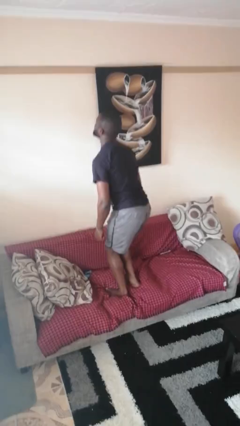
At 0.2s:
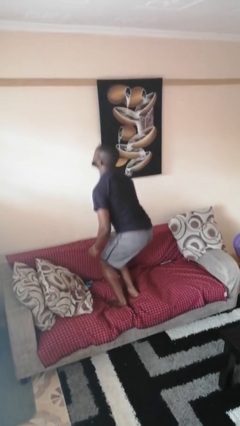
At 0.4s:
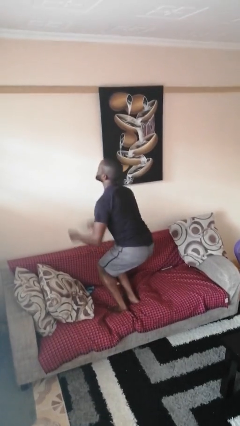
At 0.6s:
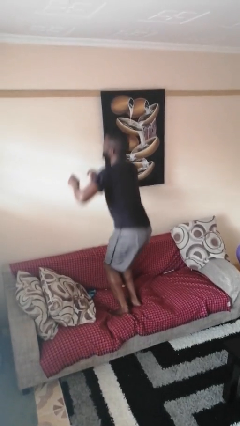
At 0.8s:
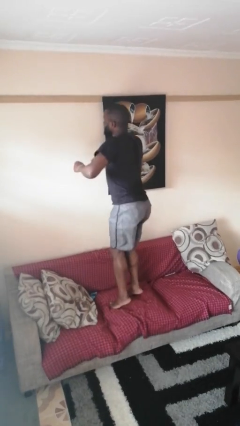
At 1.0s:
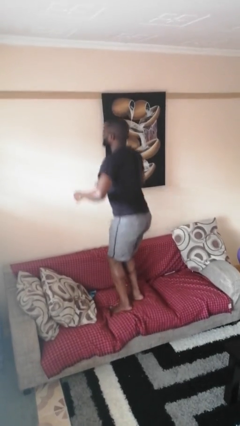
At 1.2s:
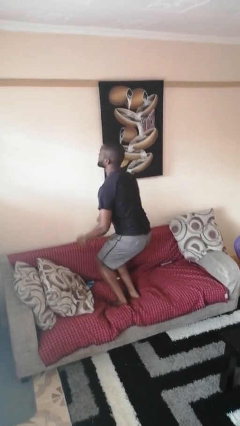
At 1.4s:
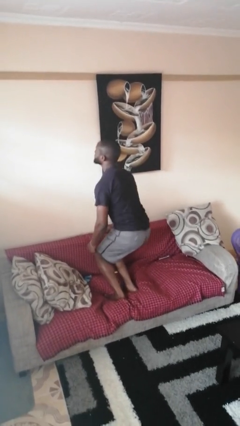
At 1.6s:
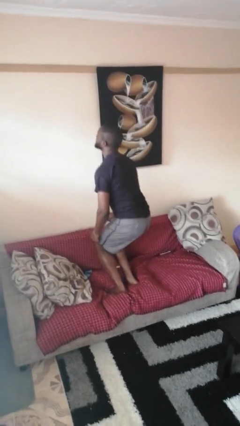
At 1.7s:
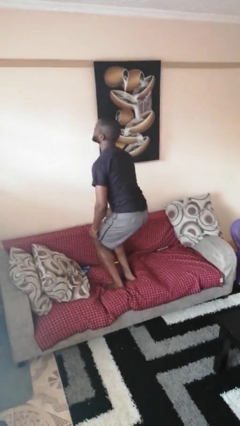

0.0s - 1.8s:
person jumps on couch

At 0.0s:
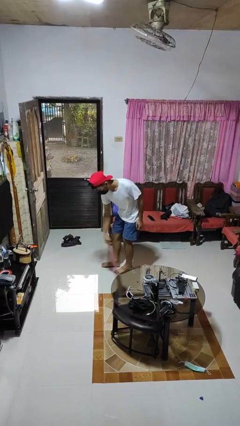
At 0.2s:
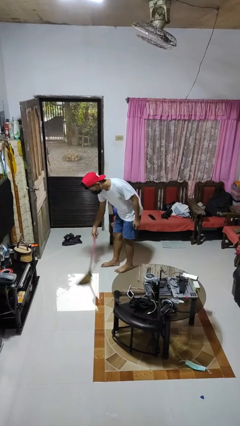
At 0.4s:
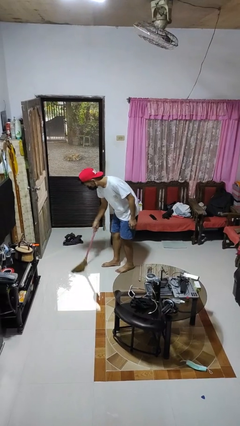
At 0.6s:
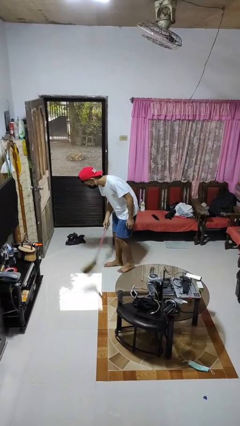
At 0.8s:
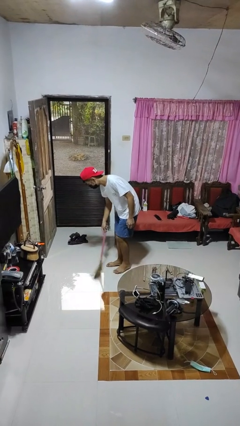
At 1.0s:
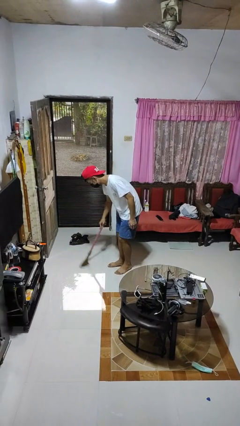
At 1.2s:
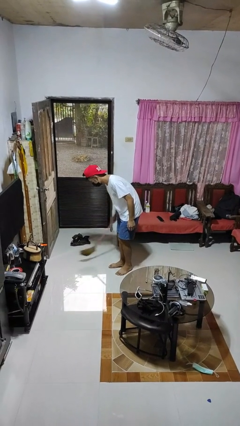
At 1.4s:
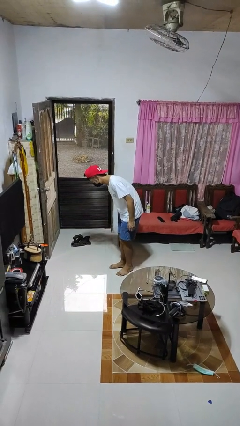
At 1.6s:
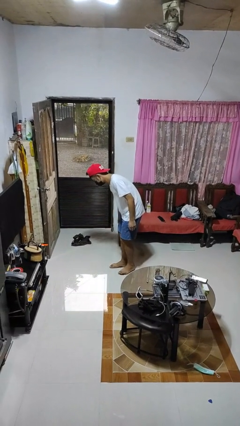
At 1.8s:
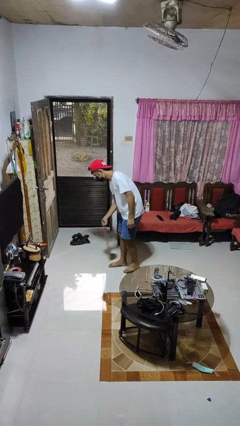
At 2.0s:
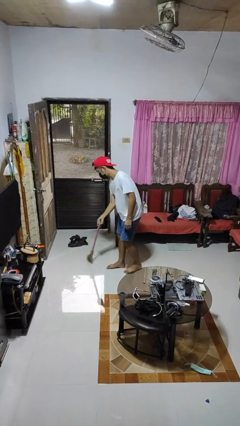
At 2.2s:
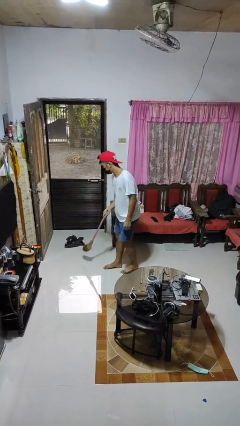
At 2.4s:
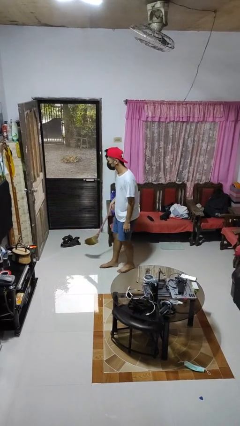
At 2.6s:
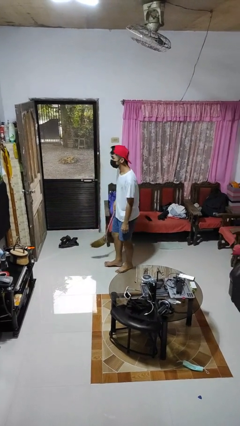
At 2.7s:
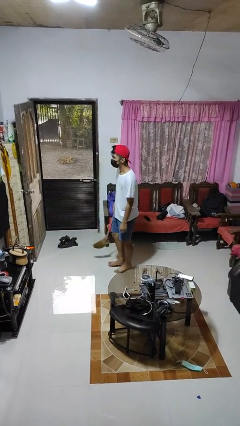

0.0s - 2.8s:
person sweeps floor

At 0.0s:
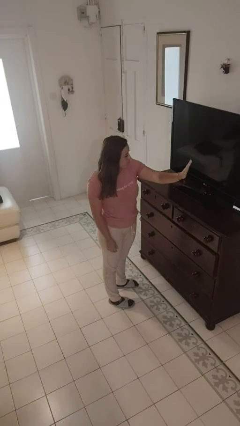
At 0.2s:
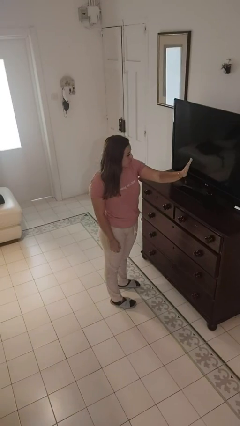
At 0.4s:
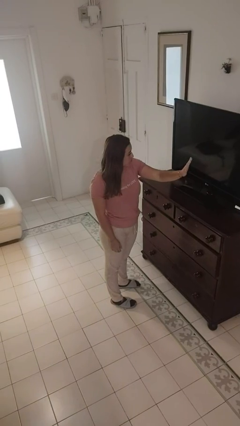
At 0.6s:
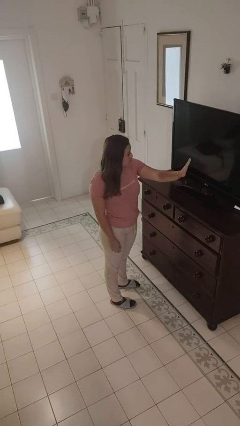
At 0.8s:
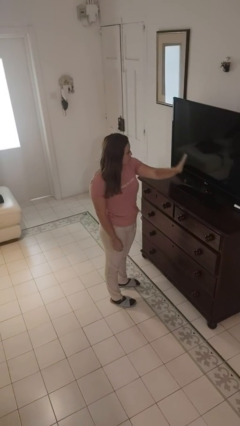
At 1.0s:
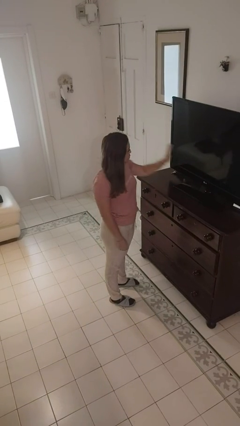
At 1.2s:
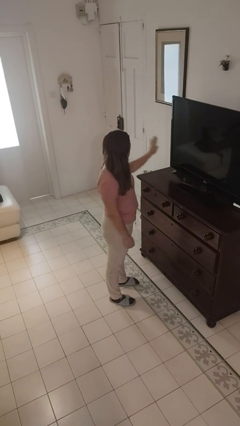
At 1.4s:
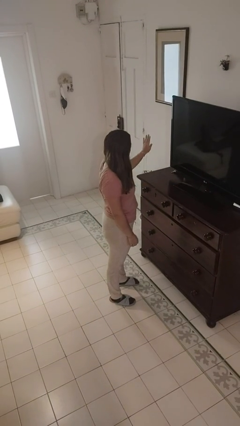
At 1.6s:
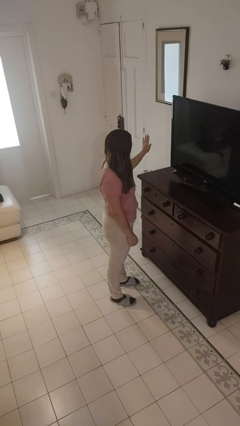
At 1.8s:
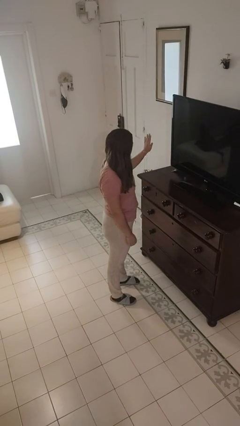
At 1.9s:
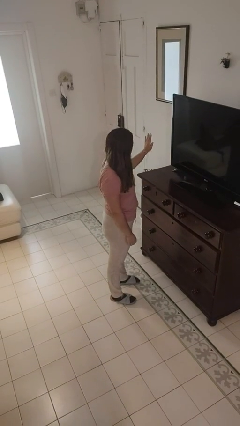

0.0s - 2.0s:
person gestures swipe right

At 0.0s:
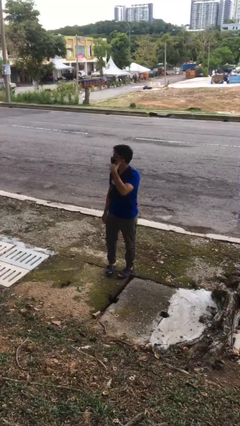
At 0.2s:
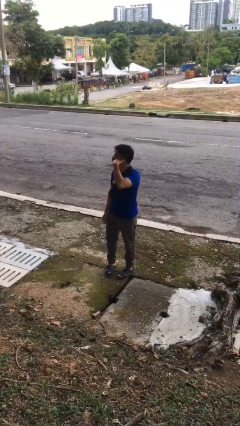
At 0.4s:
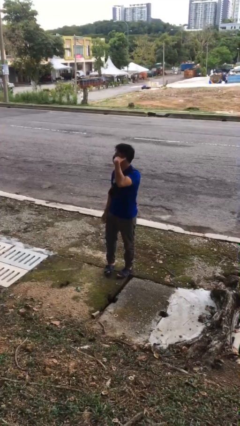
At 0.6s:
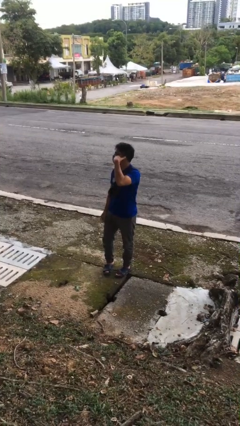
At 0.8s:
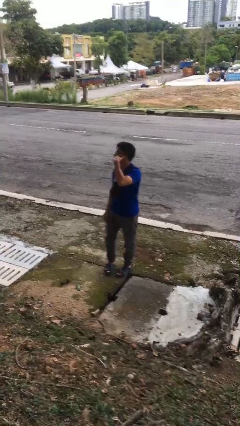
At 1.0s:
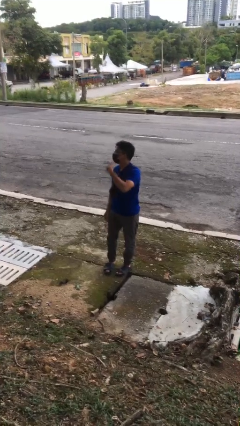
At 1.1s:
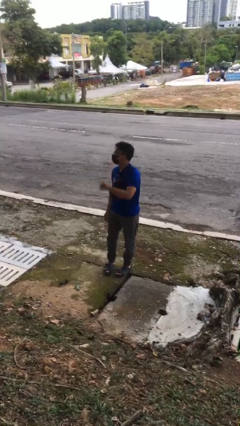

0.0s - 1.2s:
person gestures call me

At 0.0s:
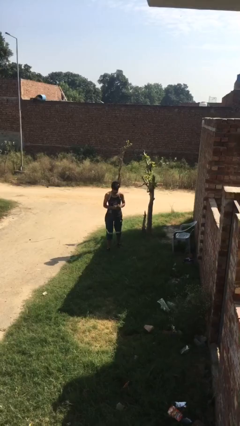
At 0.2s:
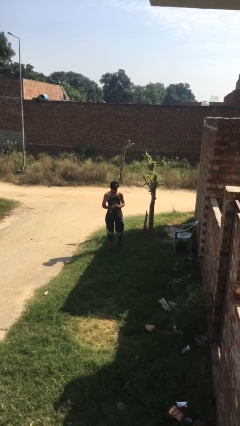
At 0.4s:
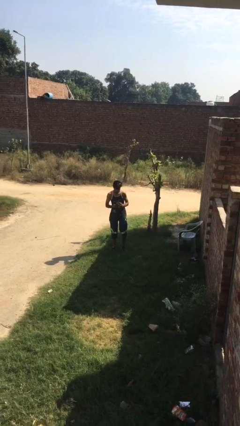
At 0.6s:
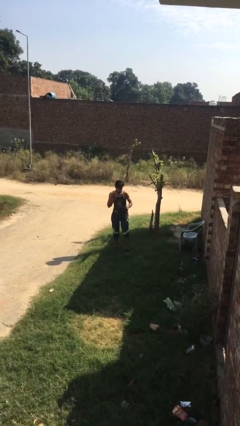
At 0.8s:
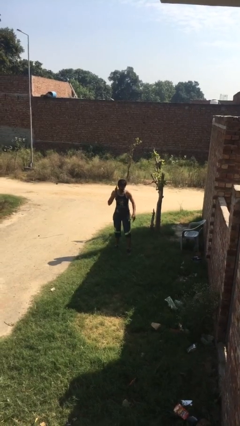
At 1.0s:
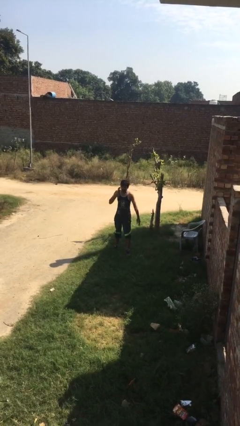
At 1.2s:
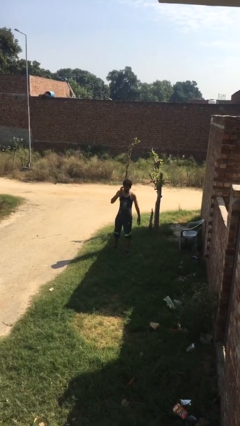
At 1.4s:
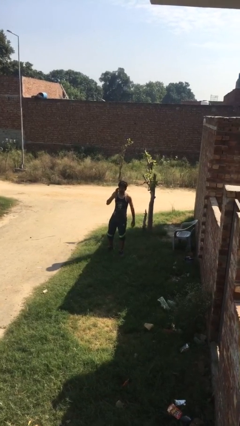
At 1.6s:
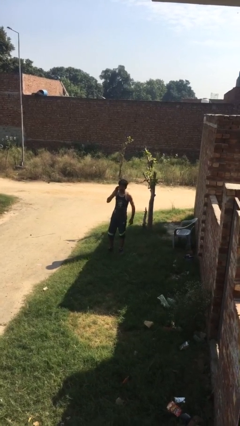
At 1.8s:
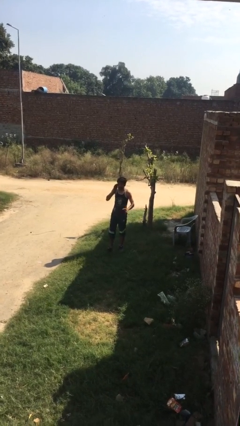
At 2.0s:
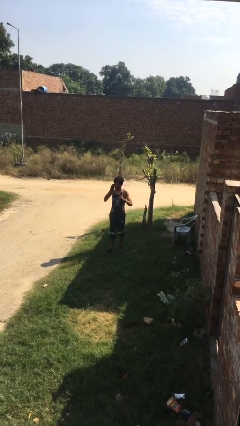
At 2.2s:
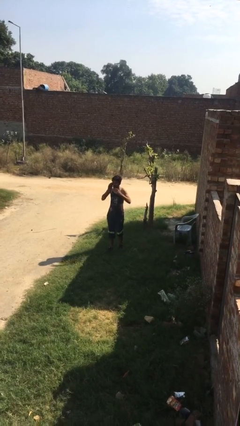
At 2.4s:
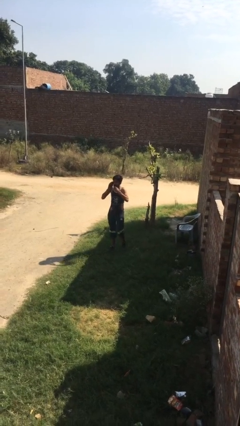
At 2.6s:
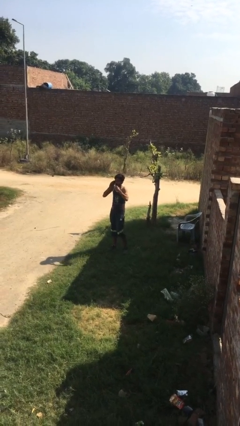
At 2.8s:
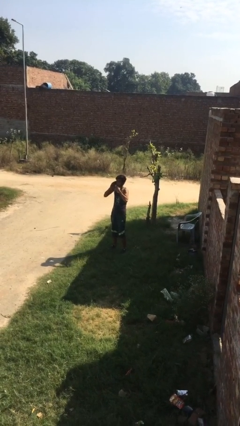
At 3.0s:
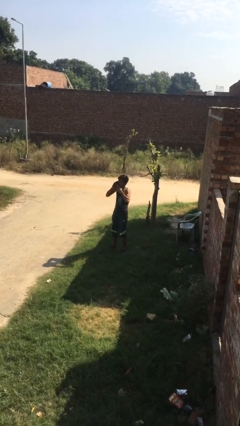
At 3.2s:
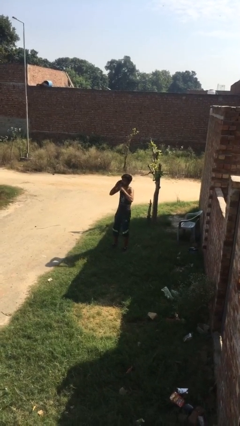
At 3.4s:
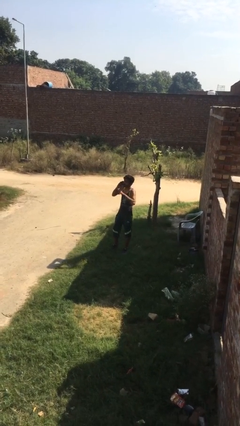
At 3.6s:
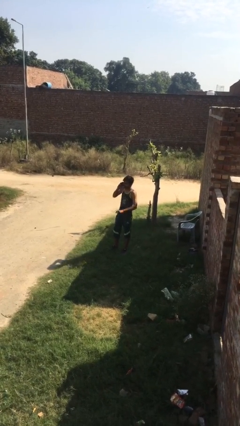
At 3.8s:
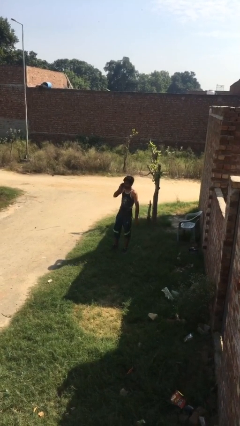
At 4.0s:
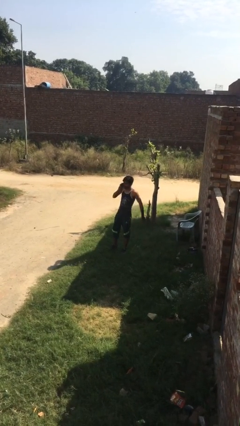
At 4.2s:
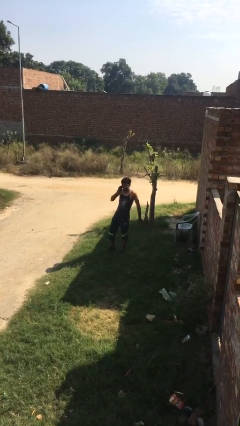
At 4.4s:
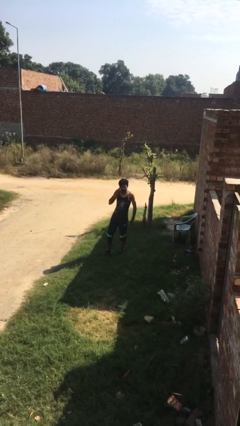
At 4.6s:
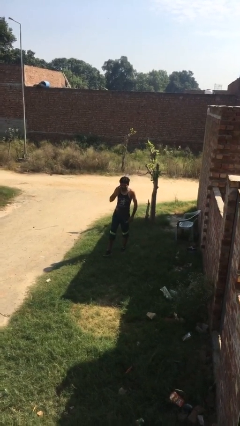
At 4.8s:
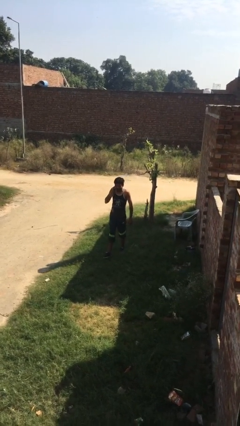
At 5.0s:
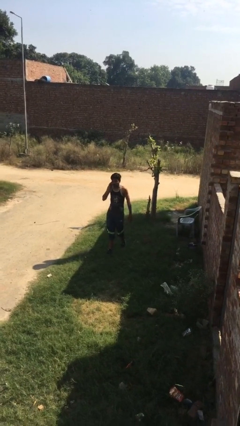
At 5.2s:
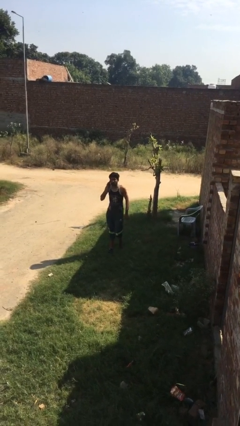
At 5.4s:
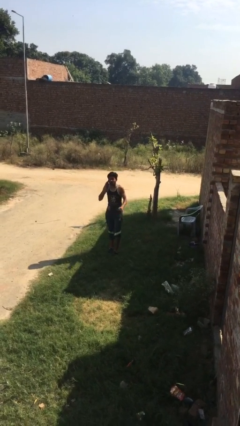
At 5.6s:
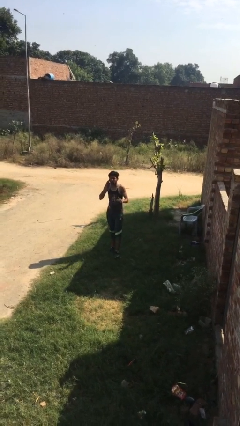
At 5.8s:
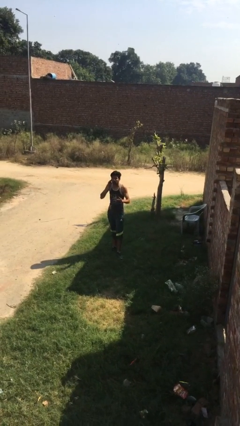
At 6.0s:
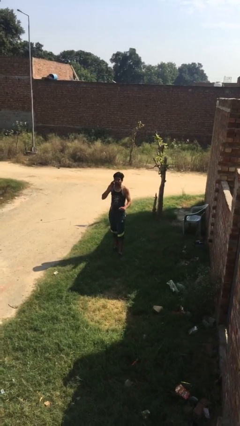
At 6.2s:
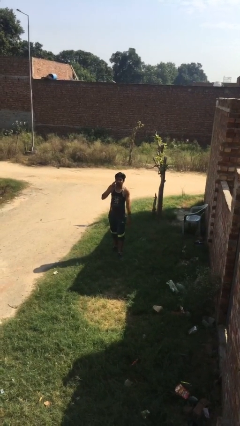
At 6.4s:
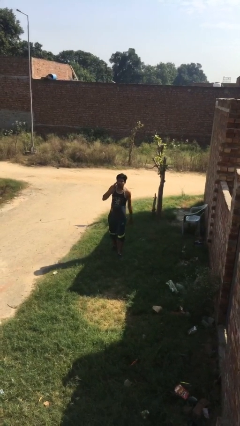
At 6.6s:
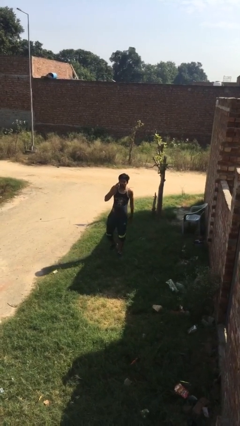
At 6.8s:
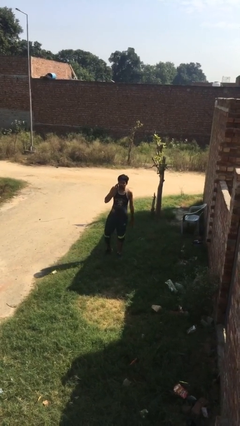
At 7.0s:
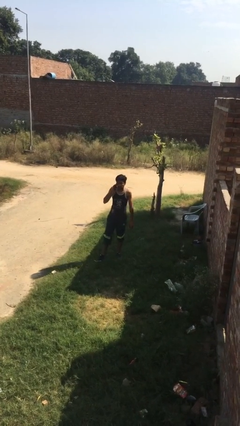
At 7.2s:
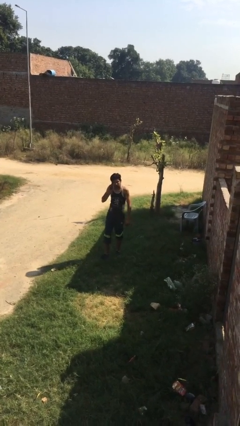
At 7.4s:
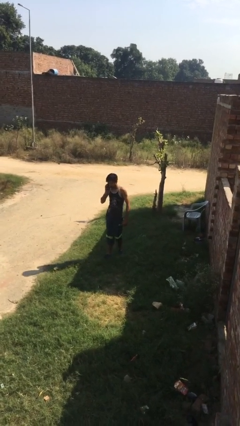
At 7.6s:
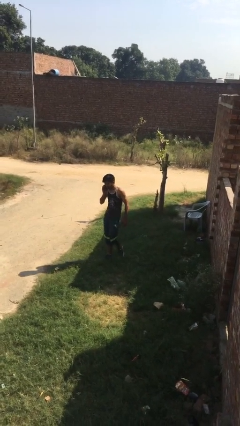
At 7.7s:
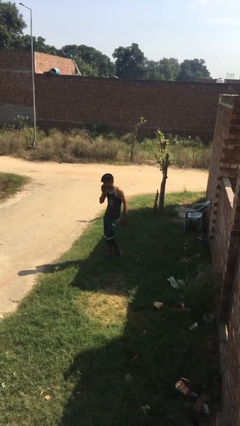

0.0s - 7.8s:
person talks on phone

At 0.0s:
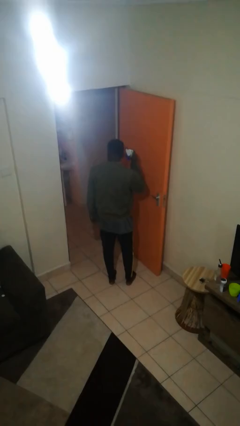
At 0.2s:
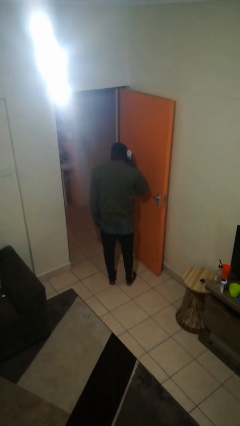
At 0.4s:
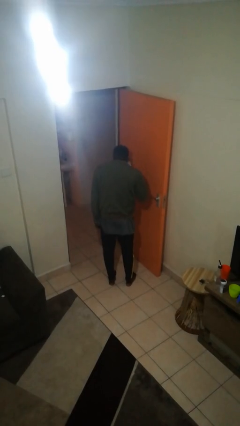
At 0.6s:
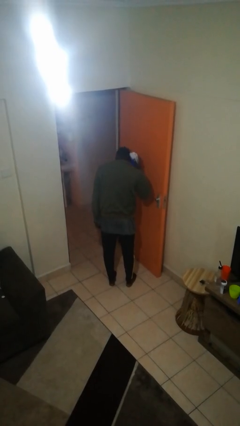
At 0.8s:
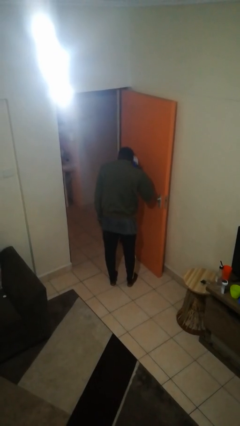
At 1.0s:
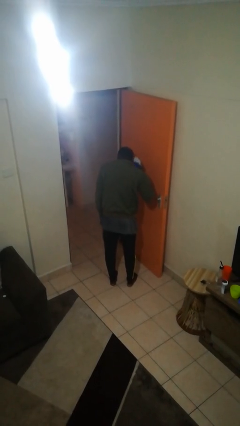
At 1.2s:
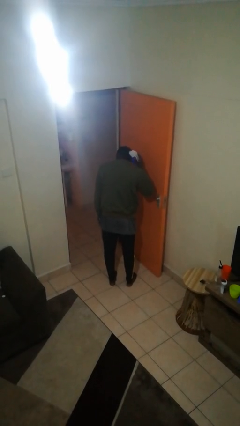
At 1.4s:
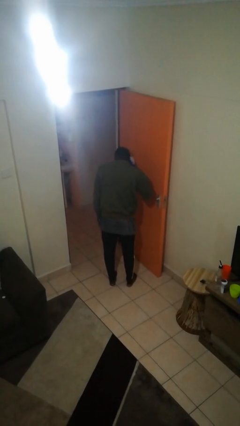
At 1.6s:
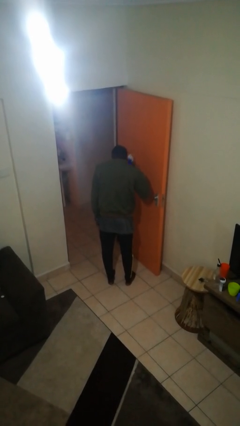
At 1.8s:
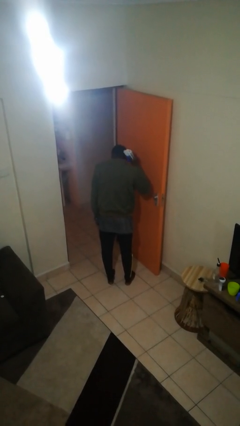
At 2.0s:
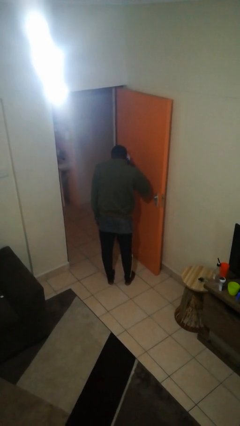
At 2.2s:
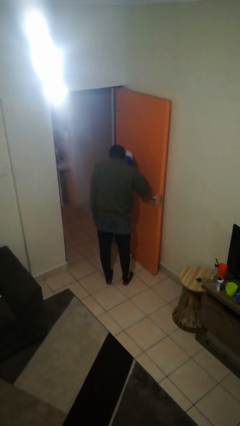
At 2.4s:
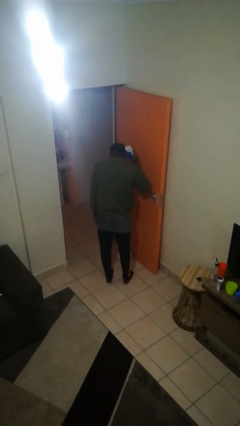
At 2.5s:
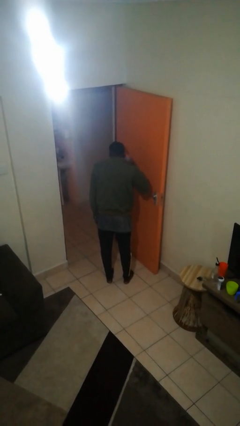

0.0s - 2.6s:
person brushes hair
